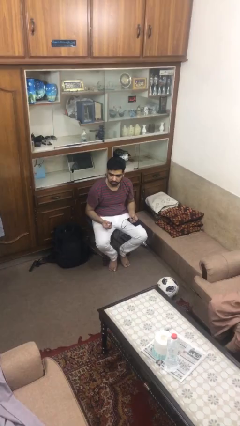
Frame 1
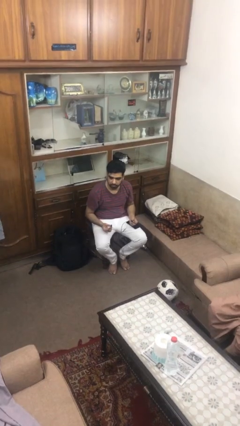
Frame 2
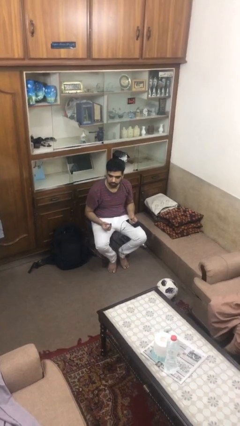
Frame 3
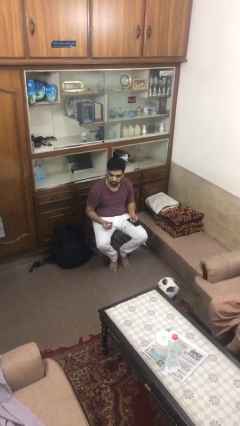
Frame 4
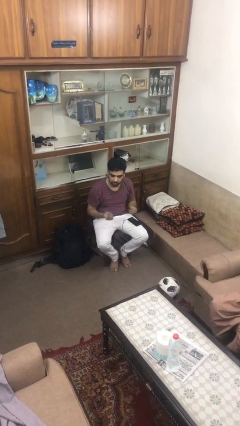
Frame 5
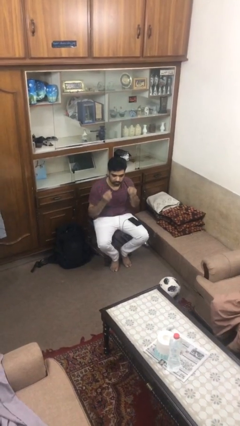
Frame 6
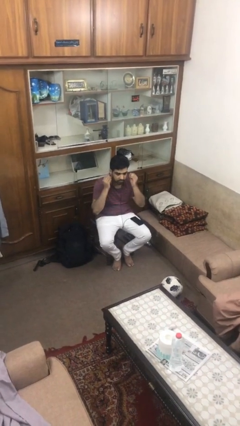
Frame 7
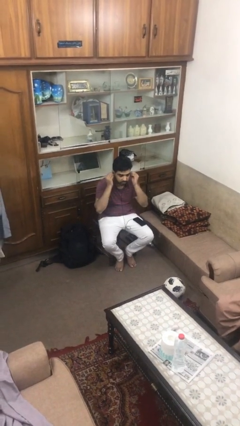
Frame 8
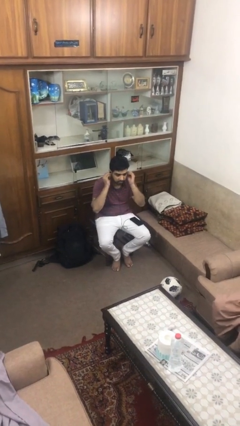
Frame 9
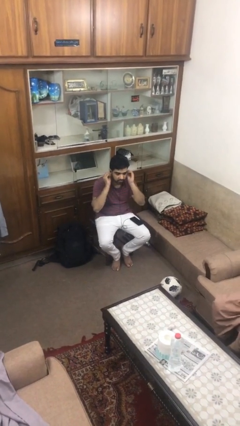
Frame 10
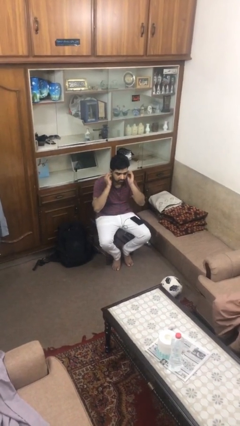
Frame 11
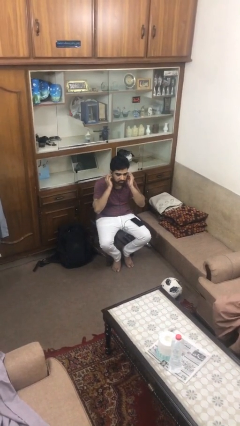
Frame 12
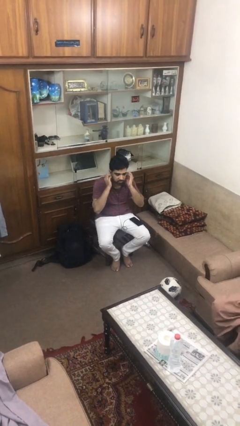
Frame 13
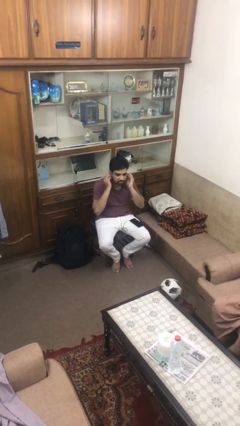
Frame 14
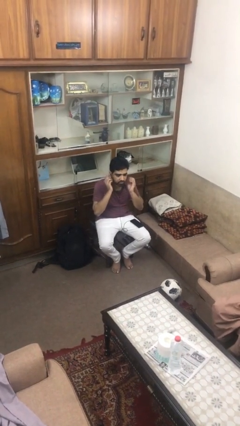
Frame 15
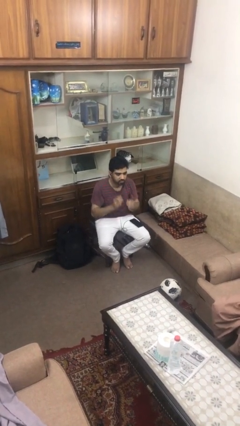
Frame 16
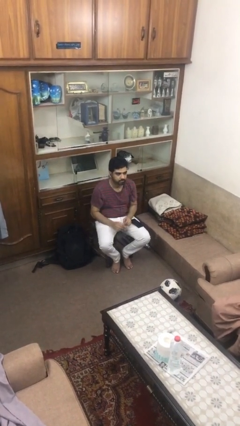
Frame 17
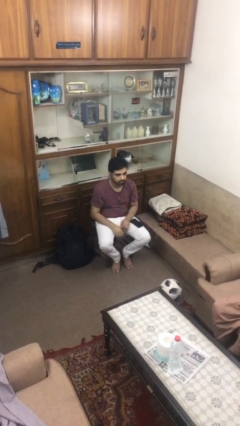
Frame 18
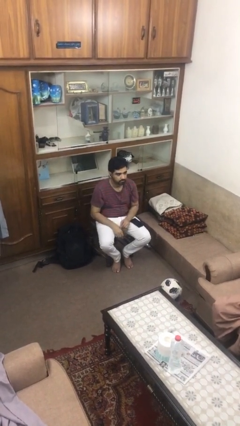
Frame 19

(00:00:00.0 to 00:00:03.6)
person puts on headphones

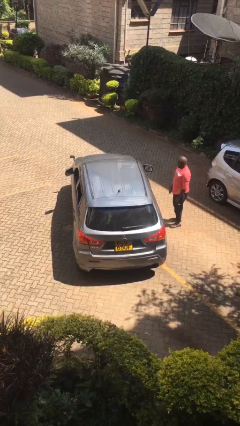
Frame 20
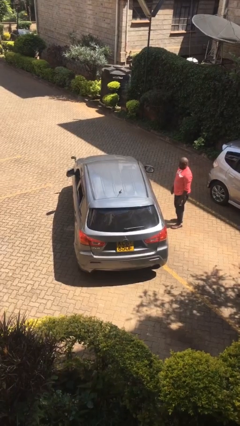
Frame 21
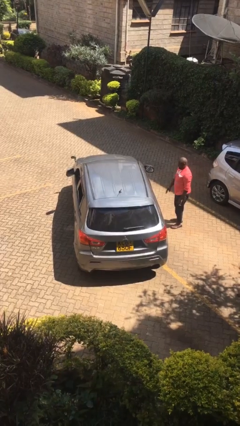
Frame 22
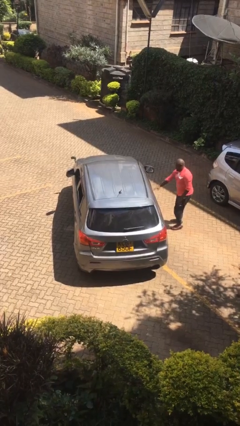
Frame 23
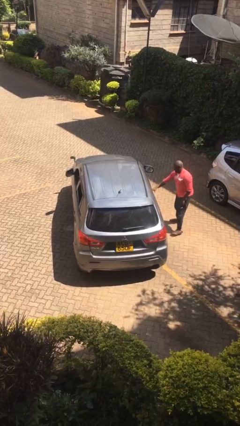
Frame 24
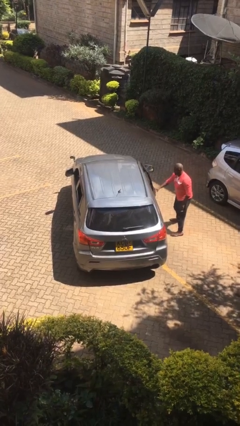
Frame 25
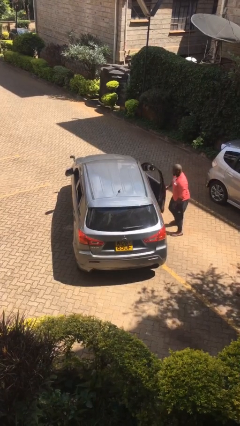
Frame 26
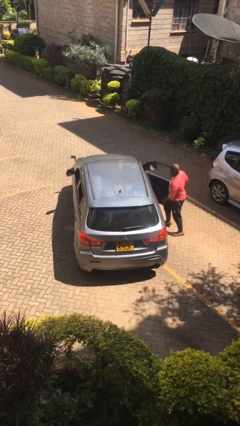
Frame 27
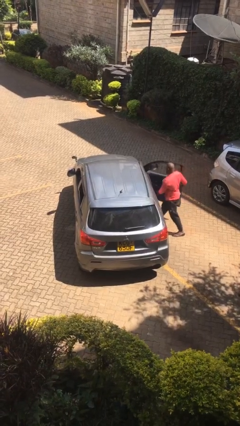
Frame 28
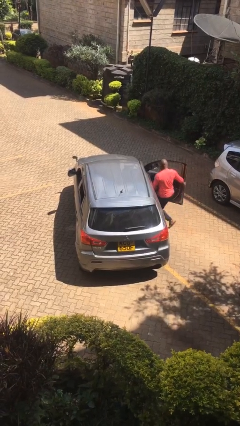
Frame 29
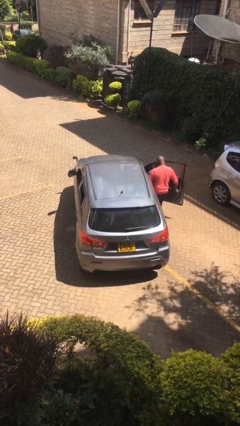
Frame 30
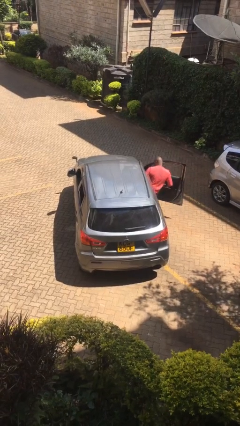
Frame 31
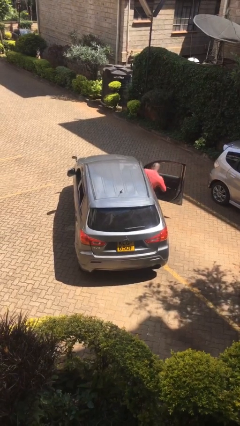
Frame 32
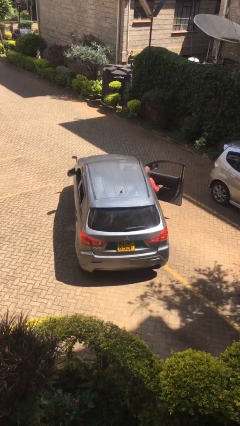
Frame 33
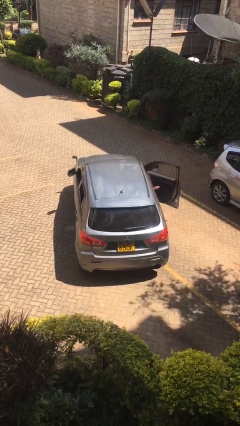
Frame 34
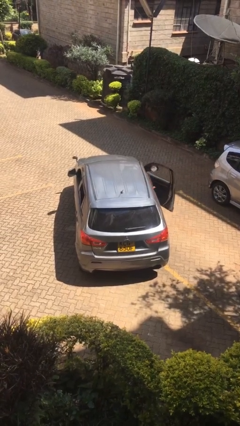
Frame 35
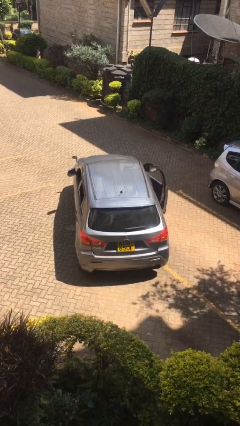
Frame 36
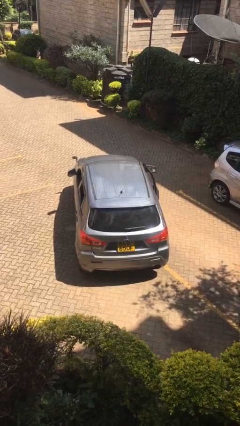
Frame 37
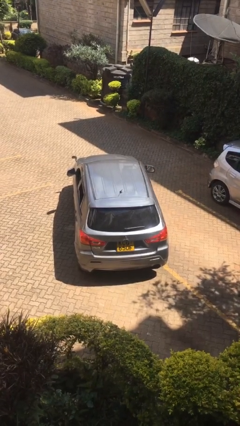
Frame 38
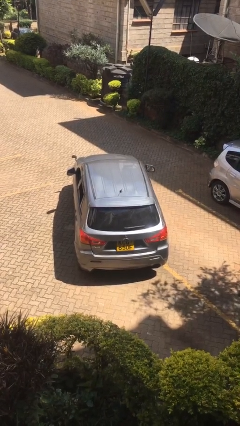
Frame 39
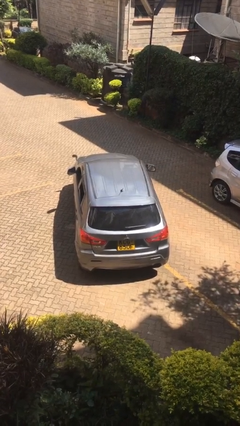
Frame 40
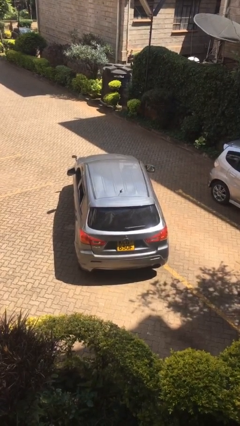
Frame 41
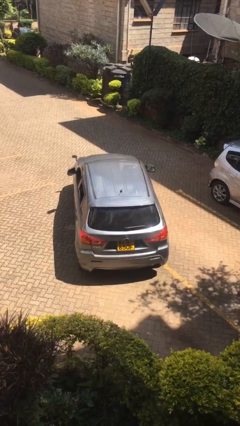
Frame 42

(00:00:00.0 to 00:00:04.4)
car picks up person

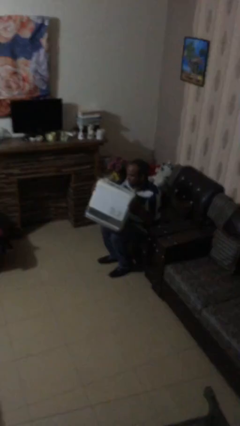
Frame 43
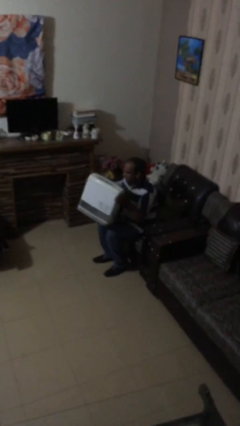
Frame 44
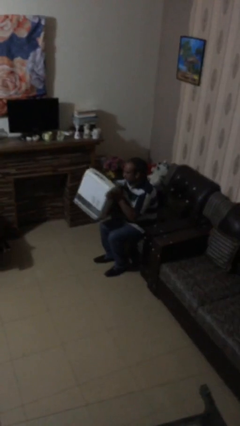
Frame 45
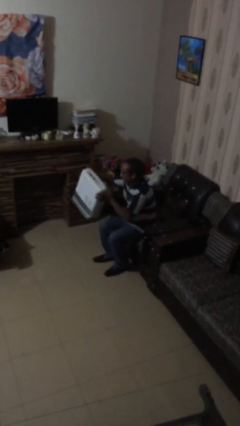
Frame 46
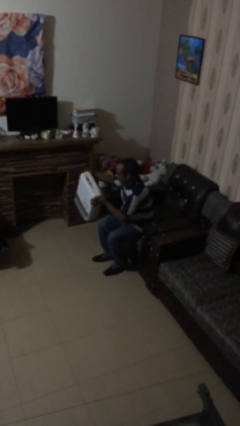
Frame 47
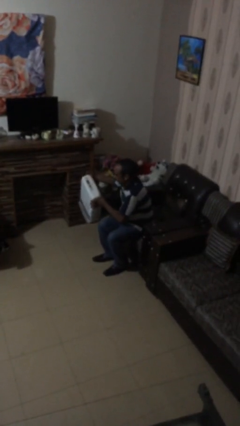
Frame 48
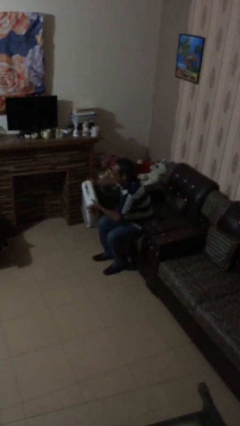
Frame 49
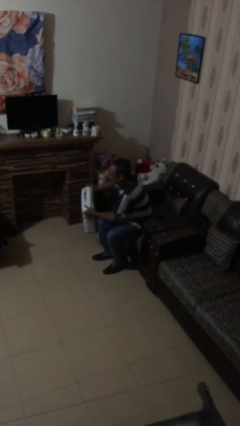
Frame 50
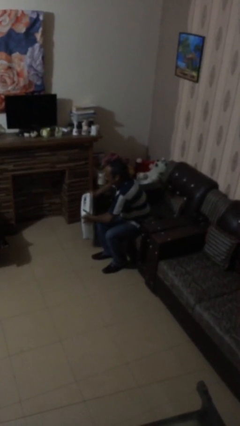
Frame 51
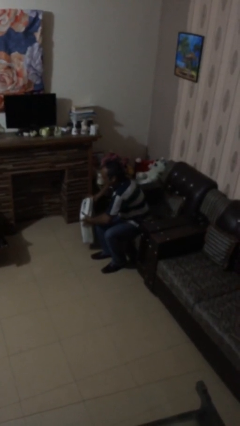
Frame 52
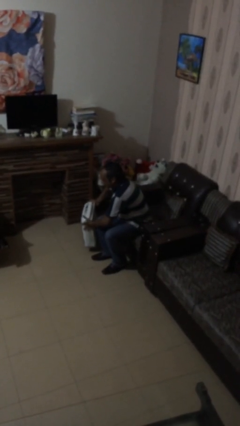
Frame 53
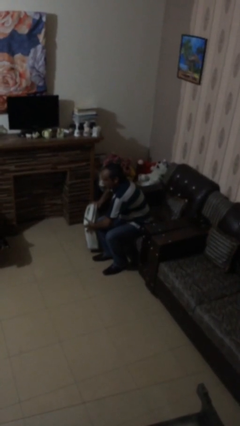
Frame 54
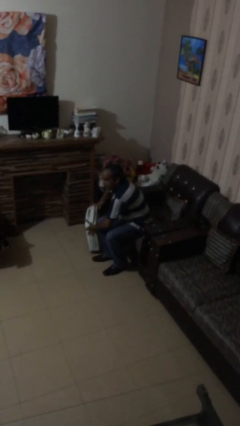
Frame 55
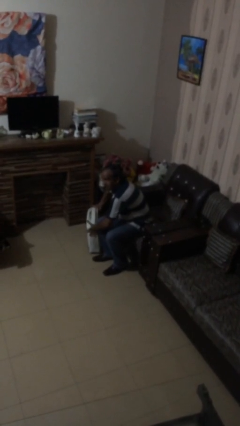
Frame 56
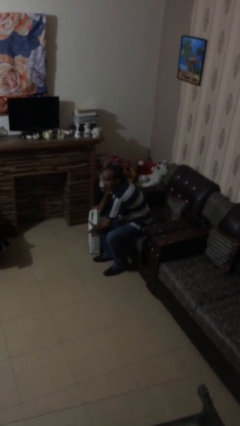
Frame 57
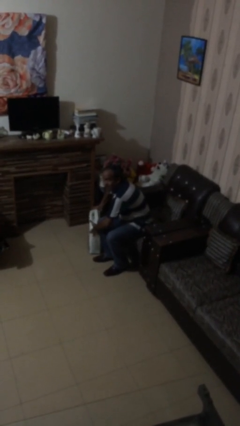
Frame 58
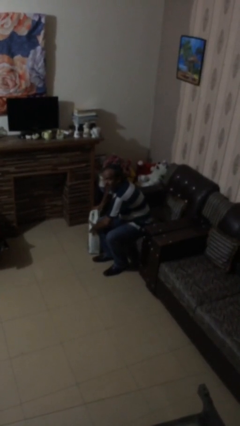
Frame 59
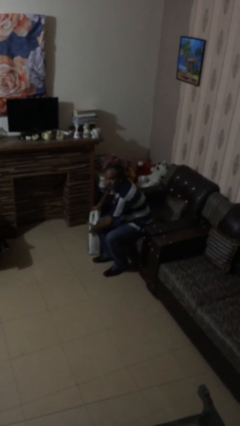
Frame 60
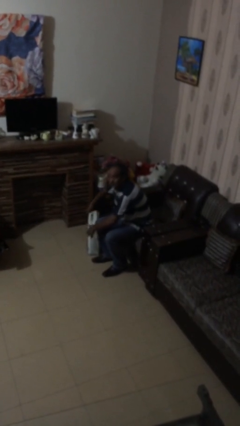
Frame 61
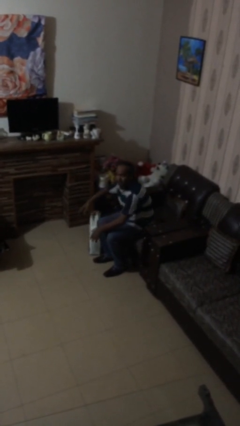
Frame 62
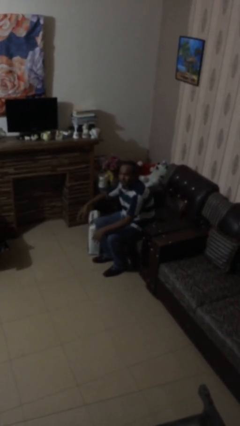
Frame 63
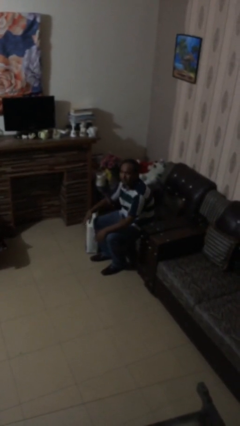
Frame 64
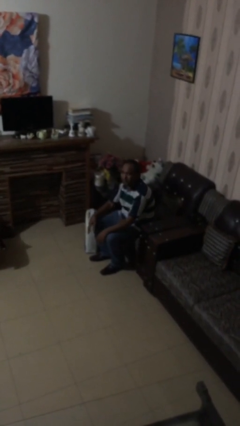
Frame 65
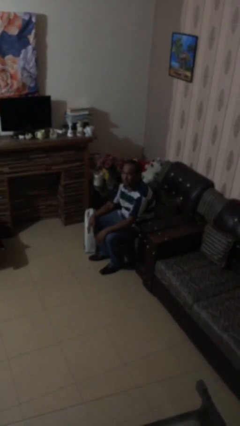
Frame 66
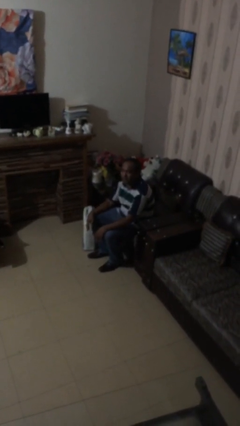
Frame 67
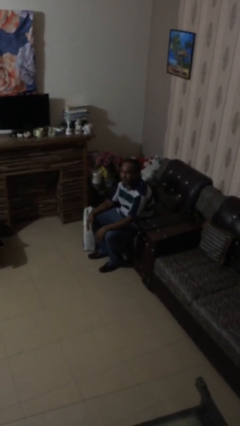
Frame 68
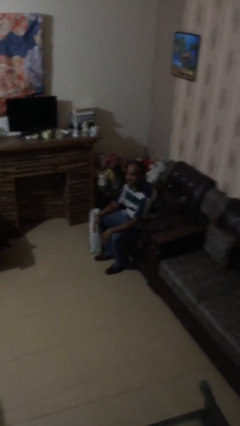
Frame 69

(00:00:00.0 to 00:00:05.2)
person puts down object on floor

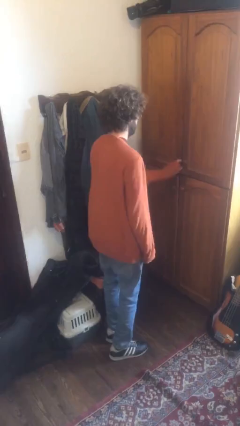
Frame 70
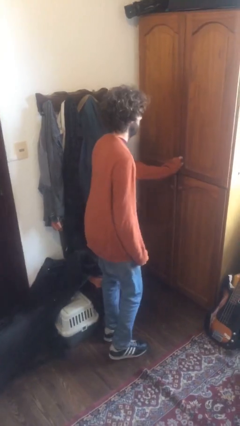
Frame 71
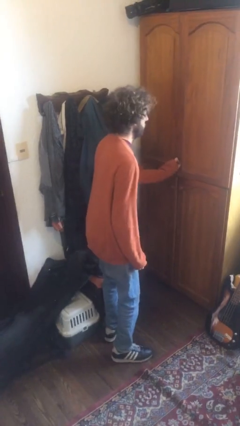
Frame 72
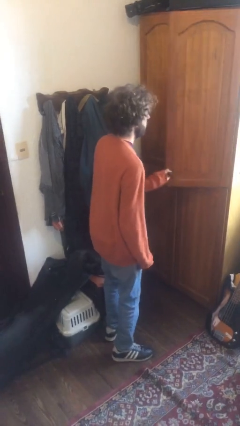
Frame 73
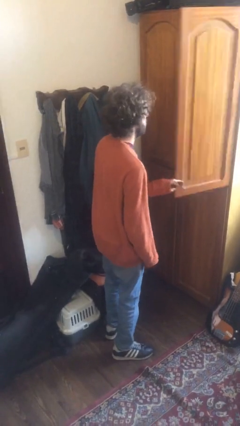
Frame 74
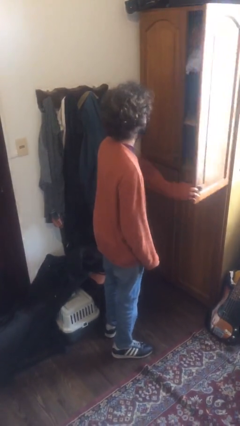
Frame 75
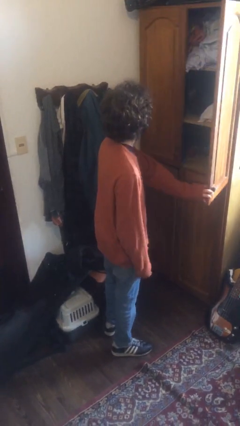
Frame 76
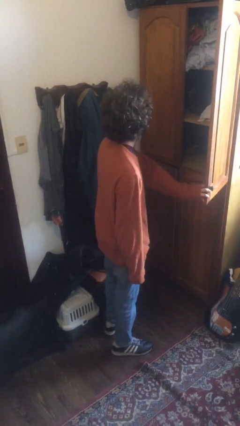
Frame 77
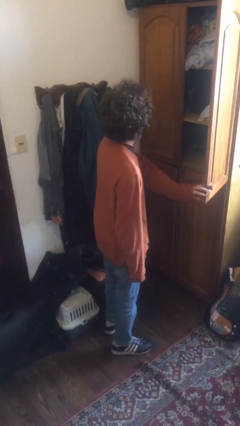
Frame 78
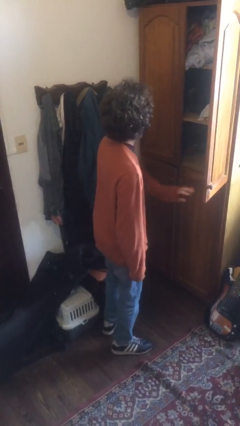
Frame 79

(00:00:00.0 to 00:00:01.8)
person opens dresser drawer

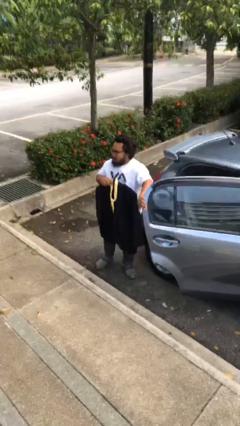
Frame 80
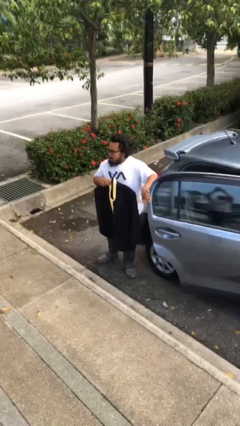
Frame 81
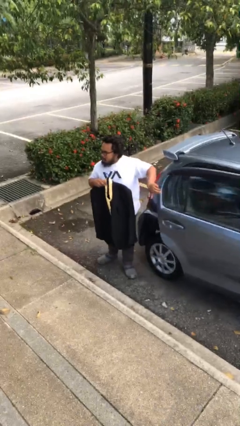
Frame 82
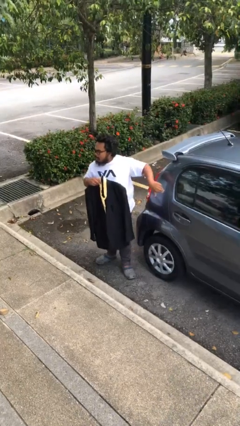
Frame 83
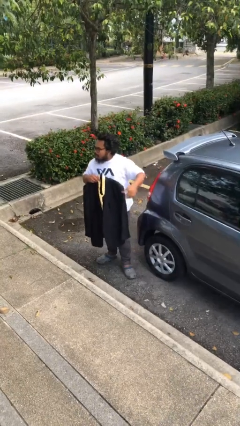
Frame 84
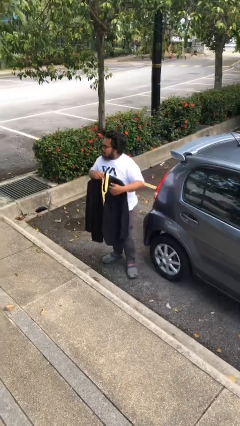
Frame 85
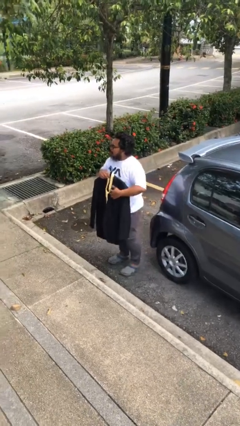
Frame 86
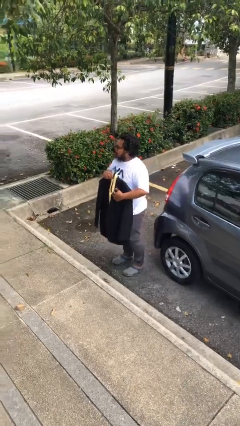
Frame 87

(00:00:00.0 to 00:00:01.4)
person closes car door

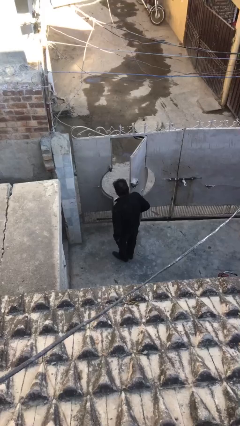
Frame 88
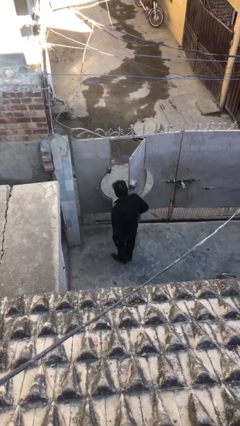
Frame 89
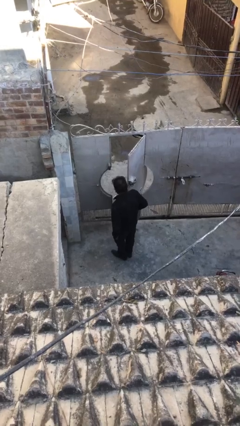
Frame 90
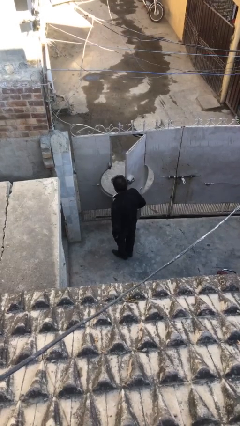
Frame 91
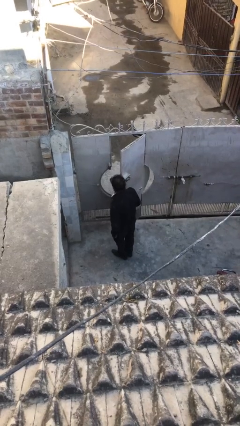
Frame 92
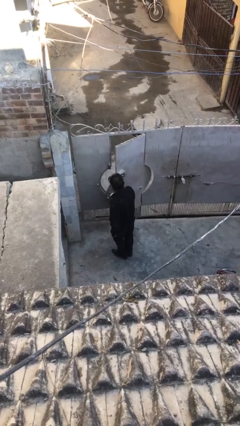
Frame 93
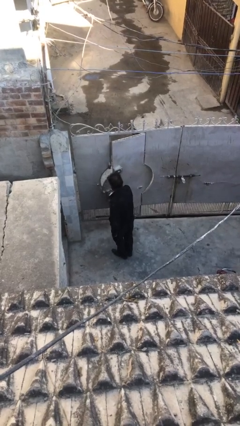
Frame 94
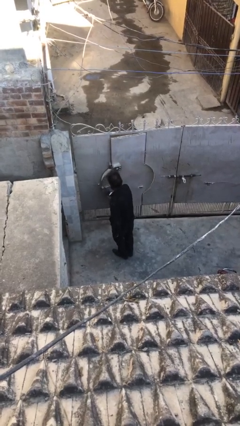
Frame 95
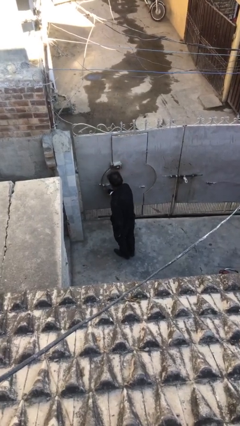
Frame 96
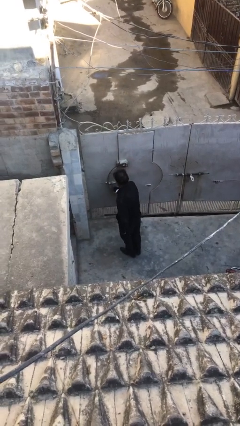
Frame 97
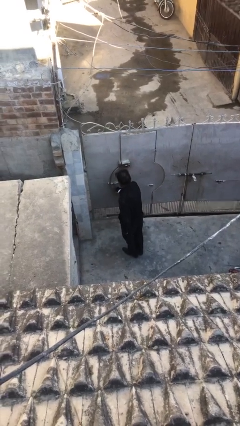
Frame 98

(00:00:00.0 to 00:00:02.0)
person closes facility door
